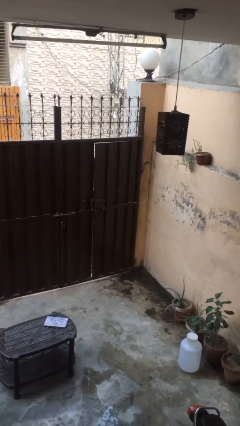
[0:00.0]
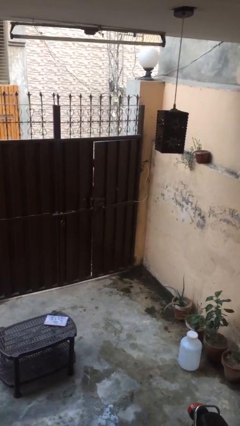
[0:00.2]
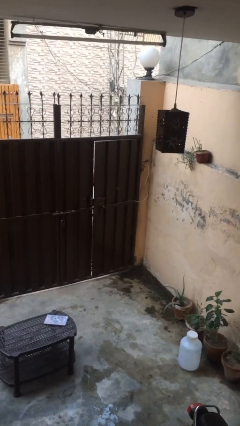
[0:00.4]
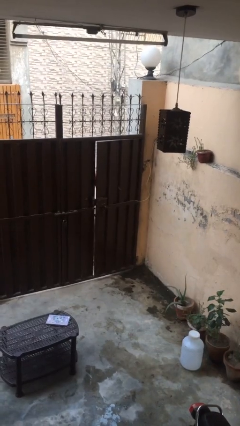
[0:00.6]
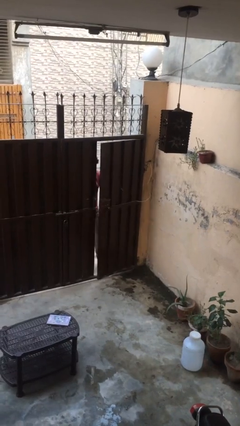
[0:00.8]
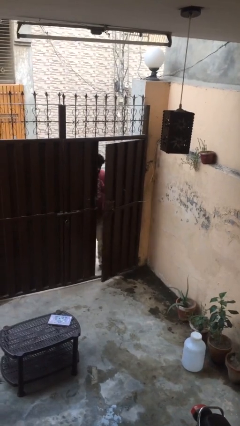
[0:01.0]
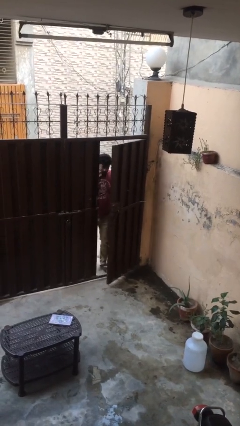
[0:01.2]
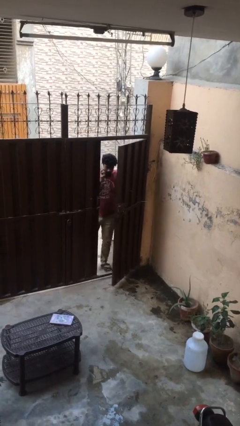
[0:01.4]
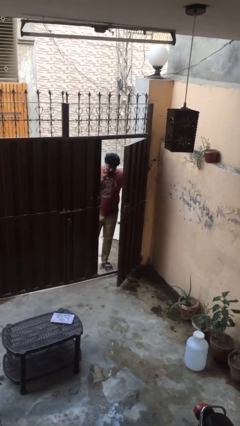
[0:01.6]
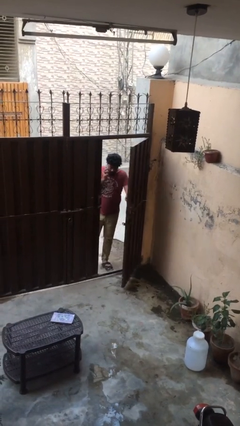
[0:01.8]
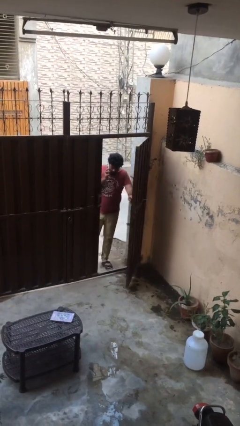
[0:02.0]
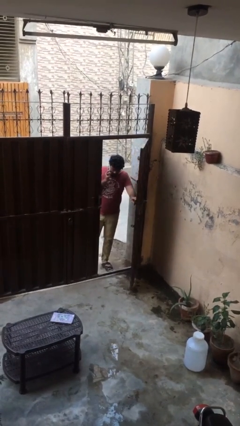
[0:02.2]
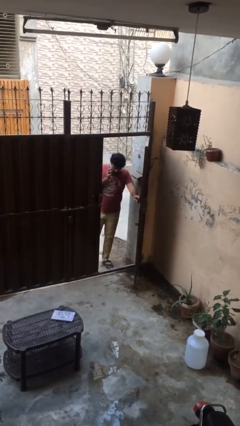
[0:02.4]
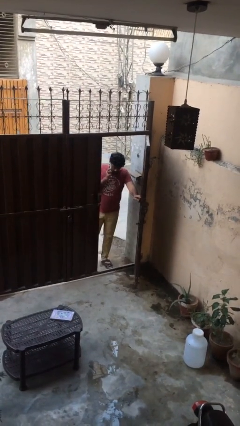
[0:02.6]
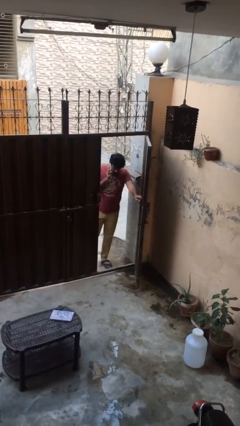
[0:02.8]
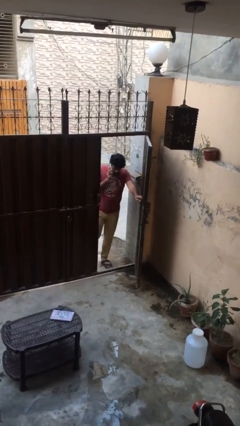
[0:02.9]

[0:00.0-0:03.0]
person opens facility door

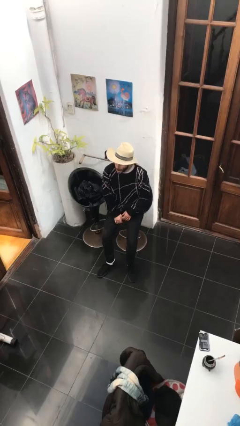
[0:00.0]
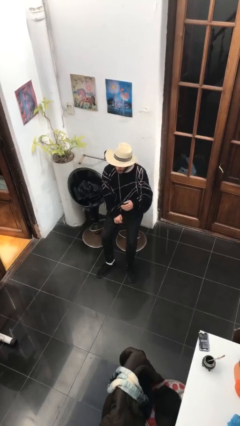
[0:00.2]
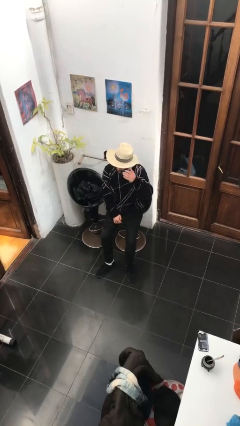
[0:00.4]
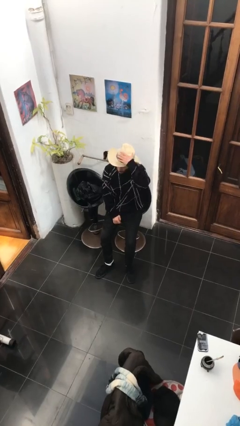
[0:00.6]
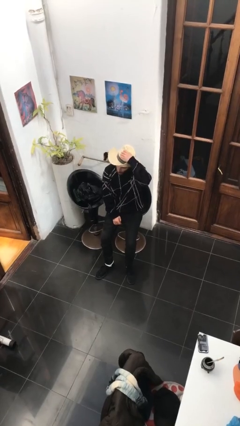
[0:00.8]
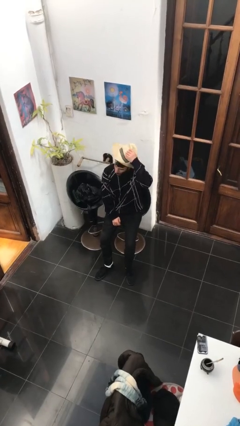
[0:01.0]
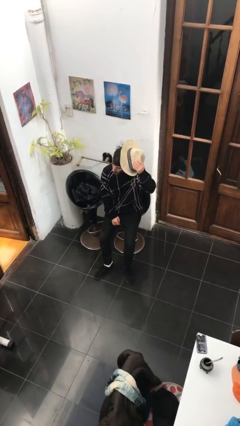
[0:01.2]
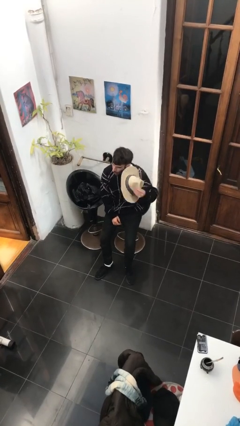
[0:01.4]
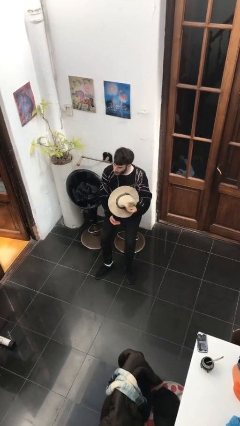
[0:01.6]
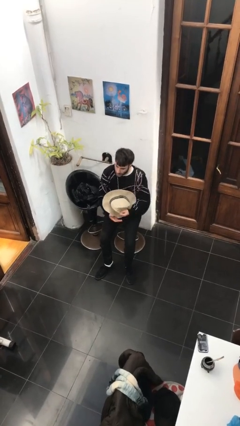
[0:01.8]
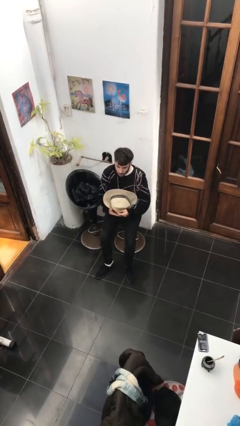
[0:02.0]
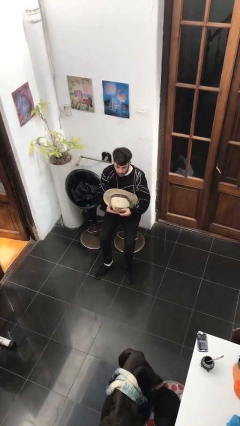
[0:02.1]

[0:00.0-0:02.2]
person takes off hat

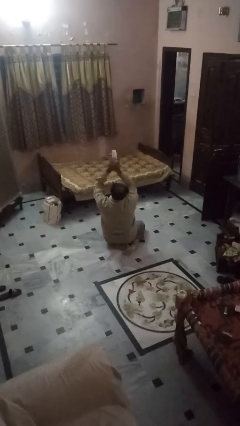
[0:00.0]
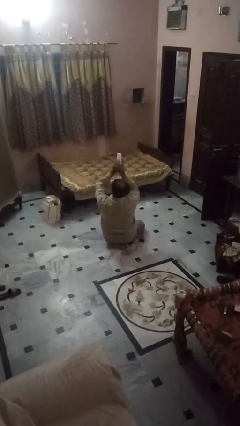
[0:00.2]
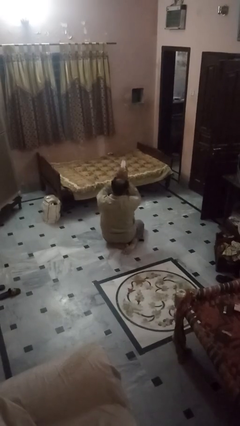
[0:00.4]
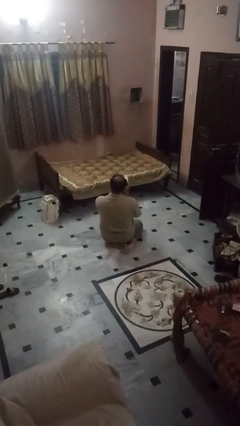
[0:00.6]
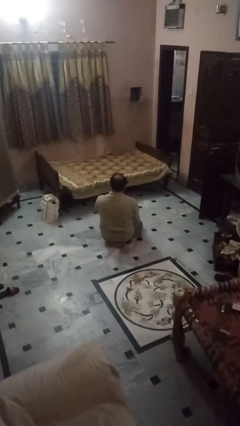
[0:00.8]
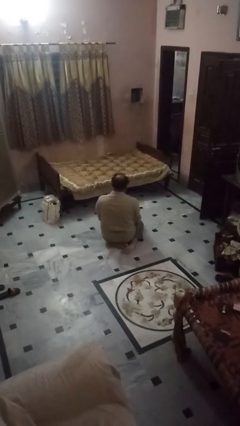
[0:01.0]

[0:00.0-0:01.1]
person catches dropped object

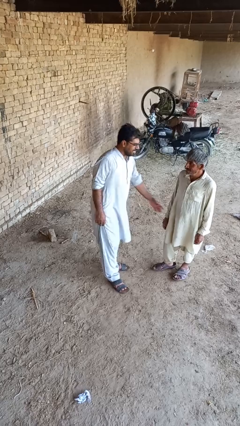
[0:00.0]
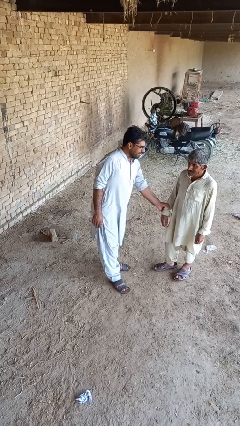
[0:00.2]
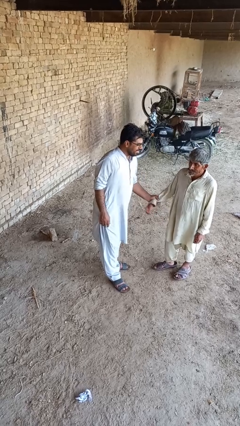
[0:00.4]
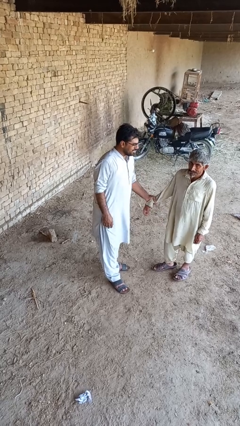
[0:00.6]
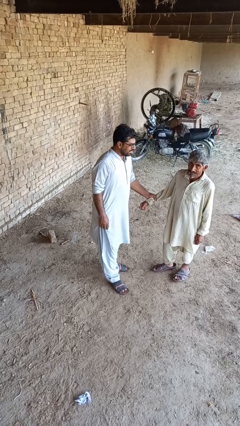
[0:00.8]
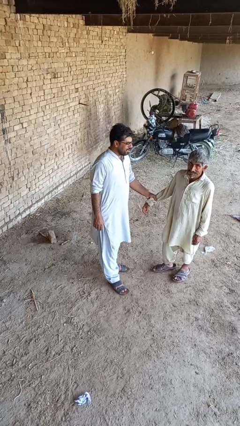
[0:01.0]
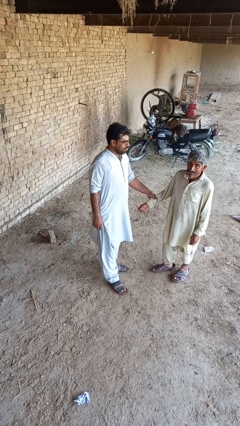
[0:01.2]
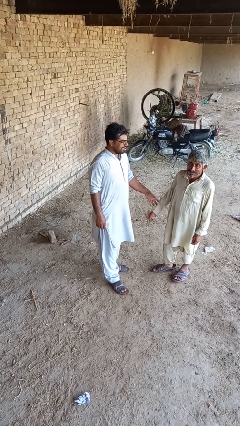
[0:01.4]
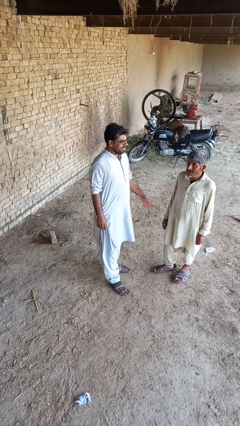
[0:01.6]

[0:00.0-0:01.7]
person grabs person by forearm

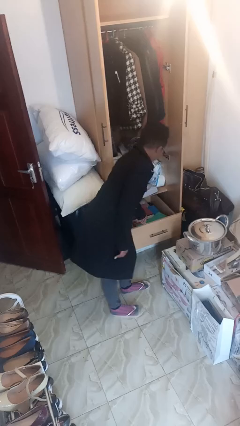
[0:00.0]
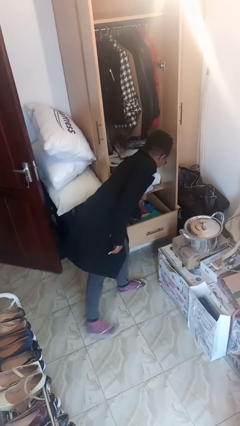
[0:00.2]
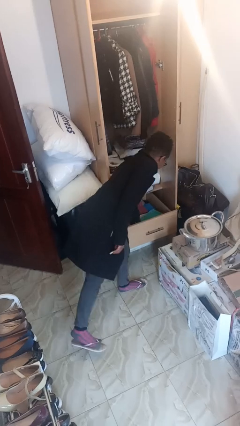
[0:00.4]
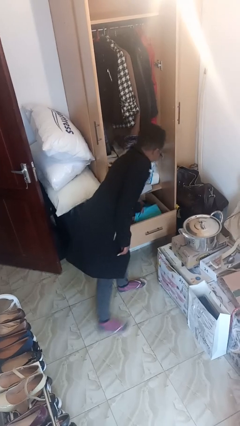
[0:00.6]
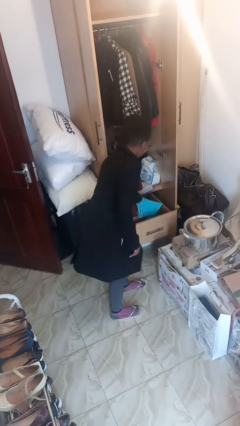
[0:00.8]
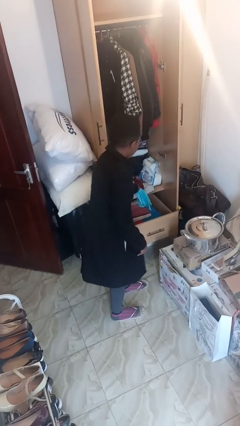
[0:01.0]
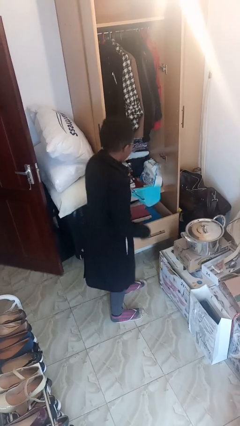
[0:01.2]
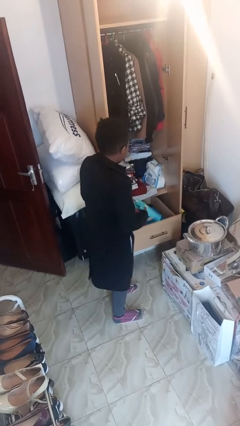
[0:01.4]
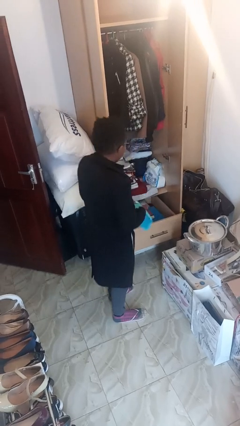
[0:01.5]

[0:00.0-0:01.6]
person takes clothes from dresser

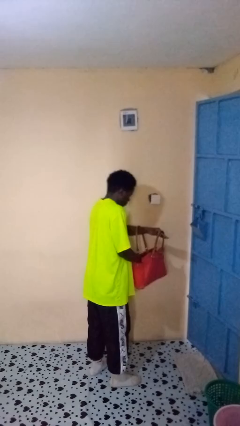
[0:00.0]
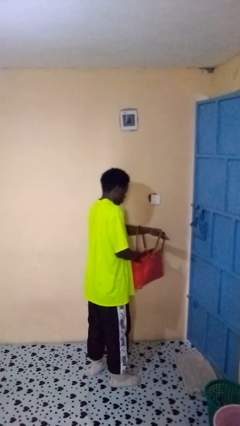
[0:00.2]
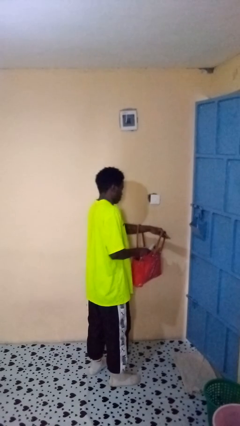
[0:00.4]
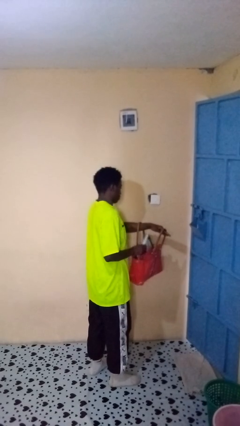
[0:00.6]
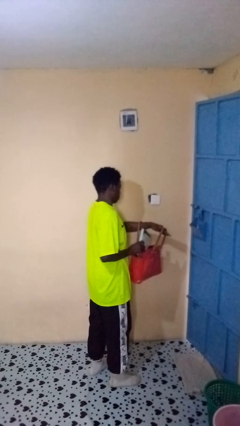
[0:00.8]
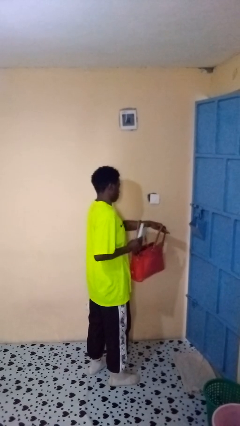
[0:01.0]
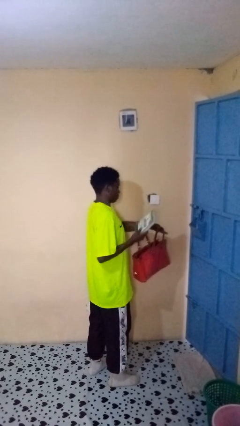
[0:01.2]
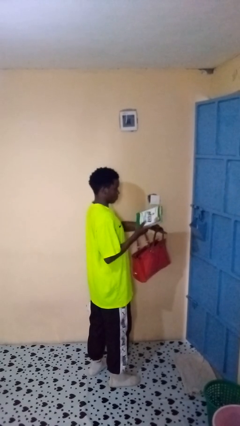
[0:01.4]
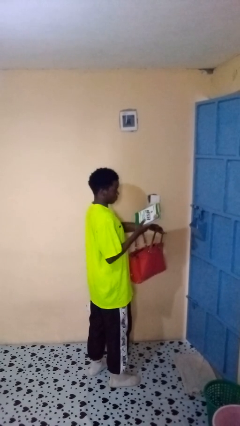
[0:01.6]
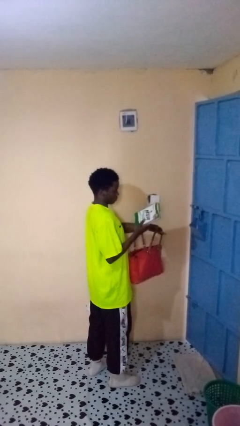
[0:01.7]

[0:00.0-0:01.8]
person takes object from purse

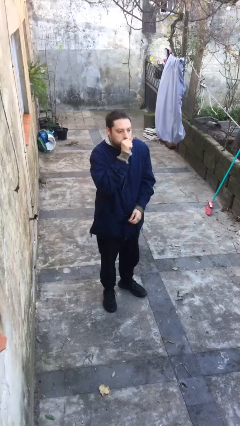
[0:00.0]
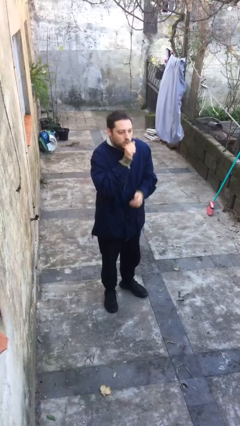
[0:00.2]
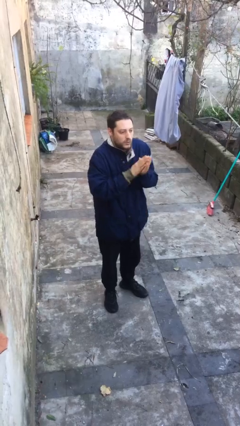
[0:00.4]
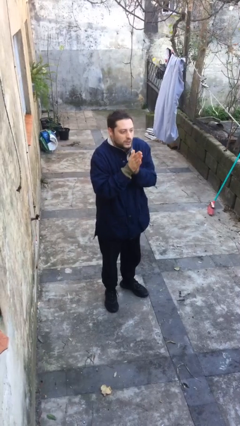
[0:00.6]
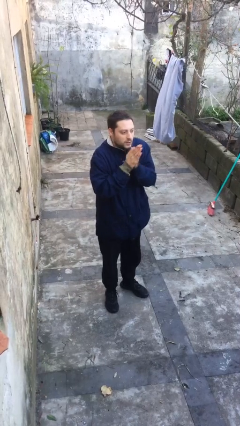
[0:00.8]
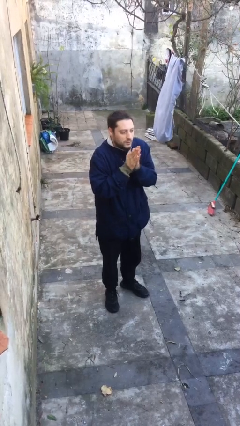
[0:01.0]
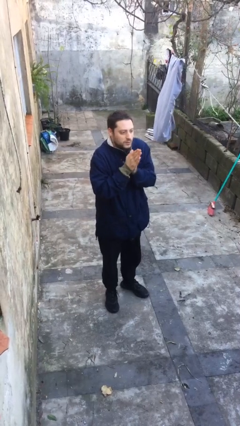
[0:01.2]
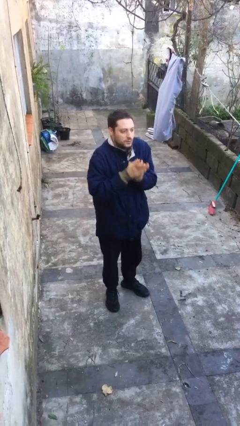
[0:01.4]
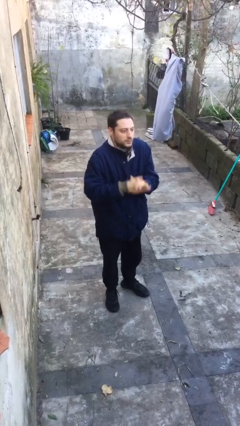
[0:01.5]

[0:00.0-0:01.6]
person blows into hands

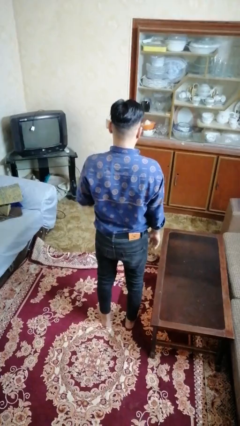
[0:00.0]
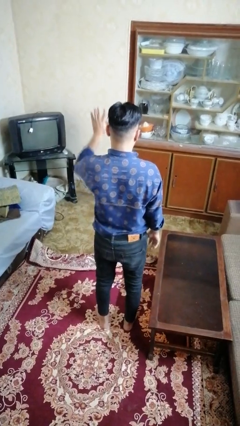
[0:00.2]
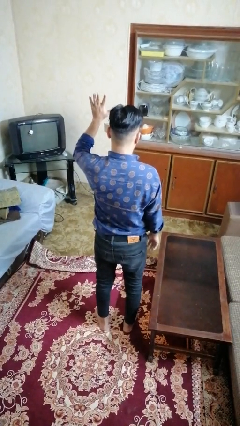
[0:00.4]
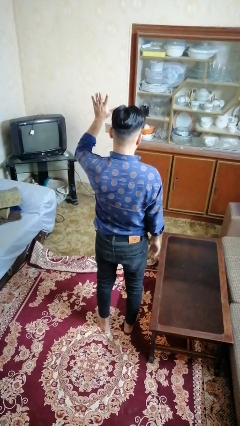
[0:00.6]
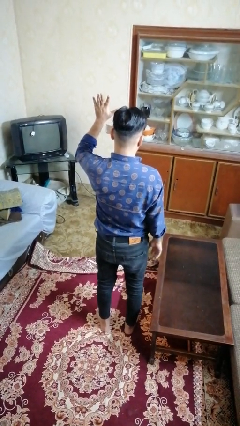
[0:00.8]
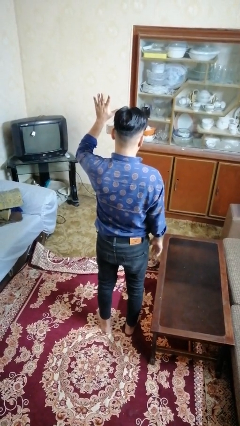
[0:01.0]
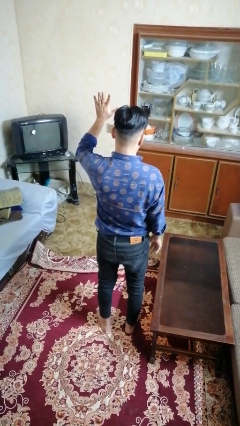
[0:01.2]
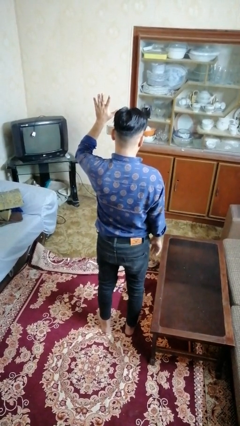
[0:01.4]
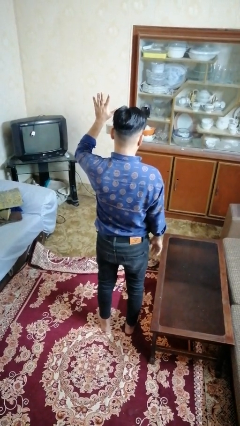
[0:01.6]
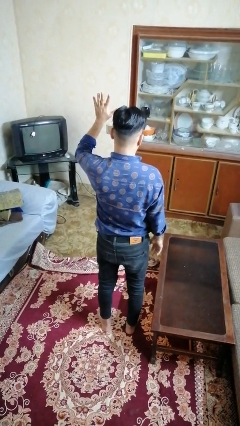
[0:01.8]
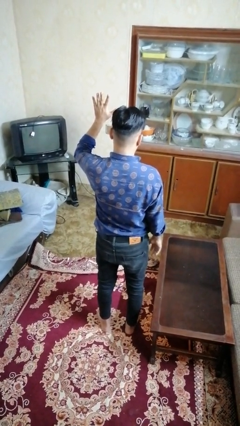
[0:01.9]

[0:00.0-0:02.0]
person gestures number five

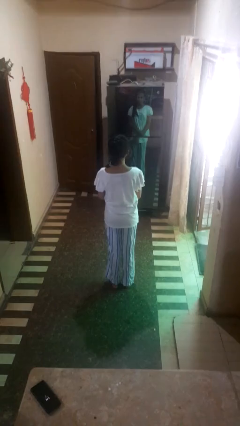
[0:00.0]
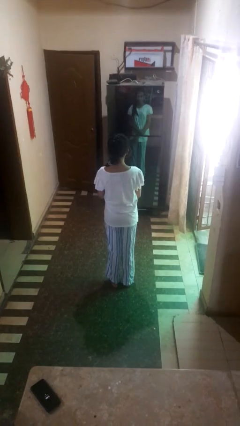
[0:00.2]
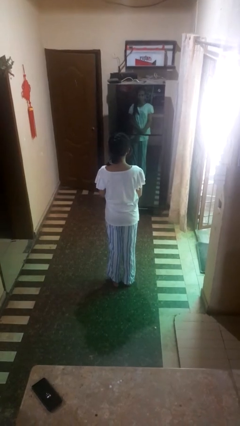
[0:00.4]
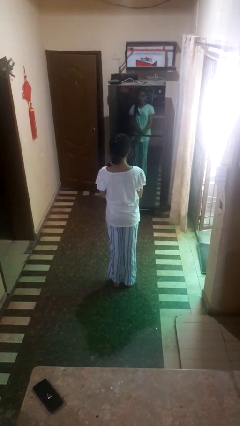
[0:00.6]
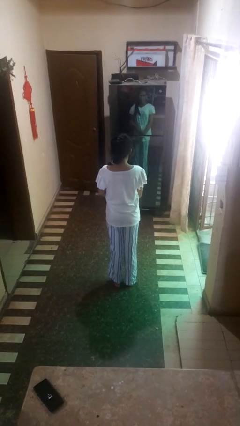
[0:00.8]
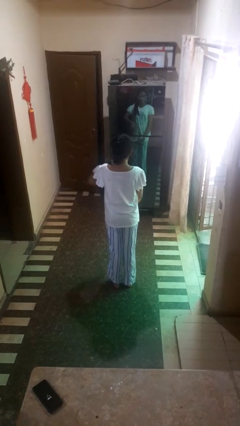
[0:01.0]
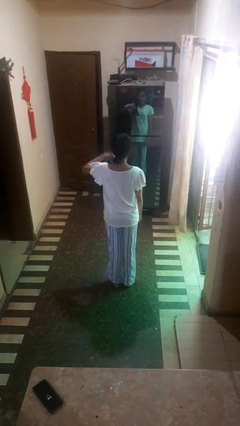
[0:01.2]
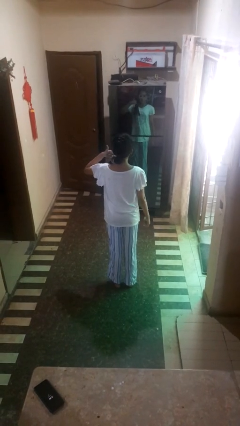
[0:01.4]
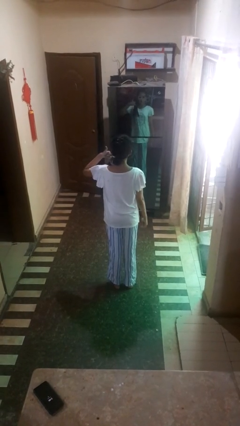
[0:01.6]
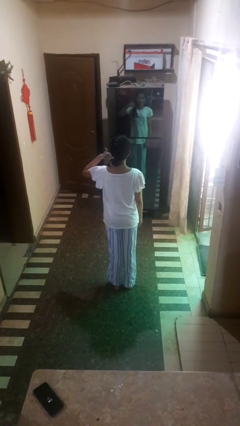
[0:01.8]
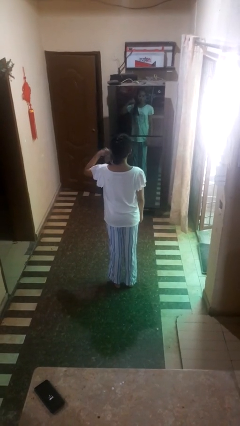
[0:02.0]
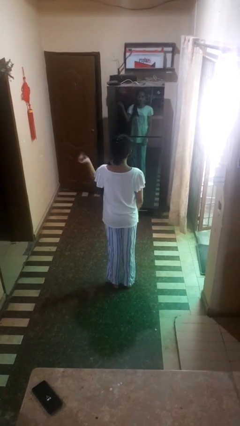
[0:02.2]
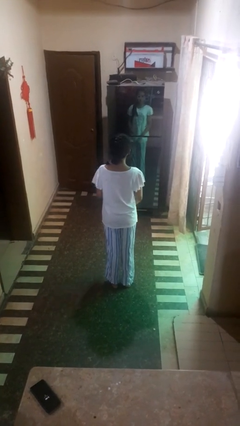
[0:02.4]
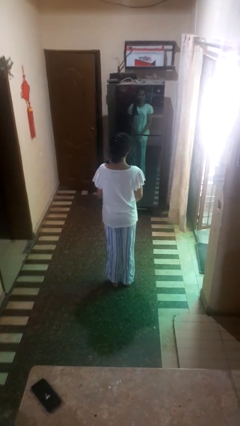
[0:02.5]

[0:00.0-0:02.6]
person gestures call me
